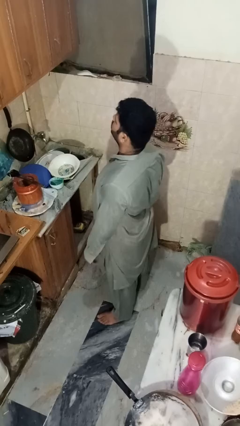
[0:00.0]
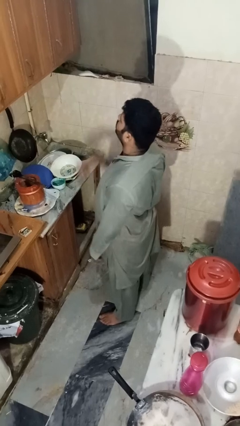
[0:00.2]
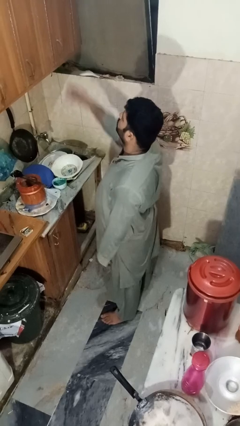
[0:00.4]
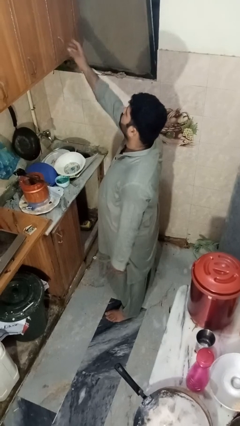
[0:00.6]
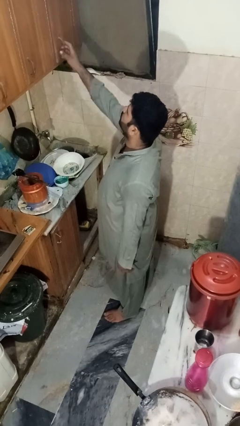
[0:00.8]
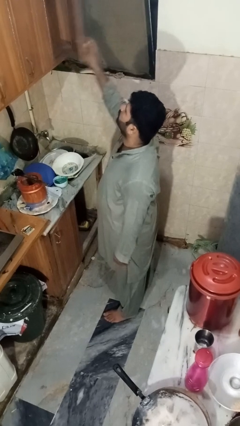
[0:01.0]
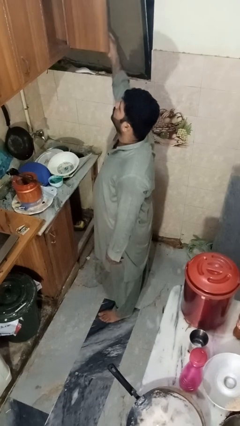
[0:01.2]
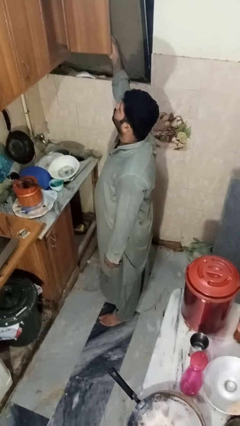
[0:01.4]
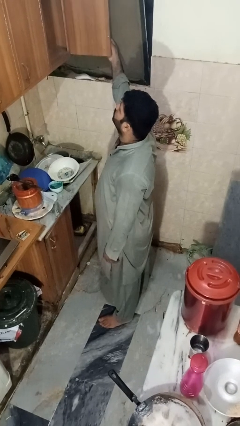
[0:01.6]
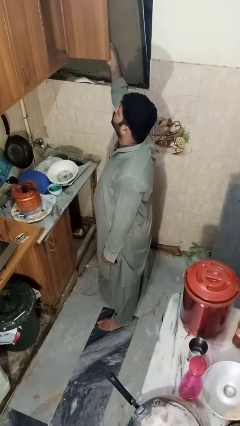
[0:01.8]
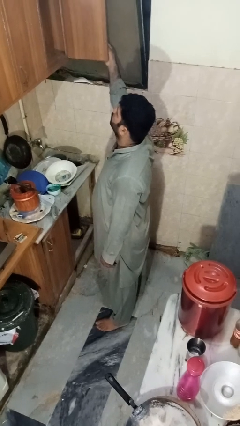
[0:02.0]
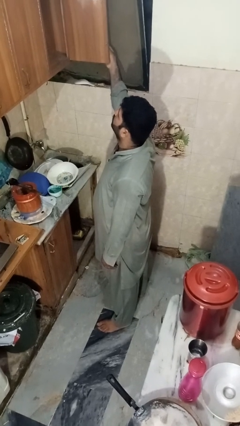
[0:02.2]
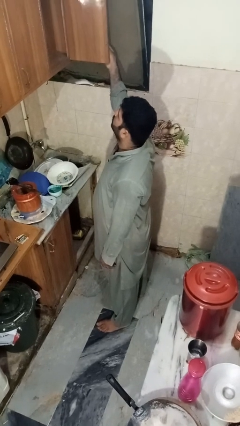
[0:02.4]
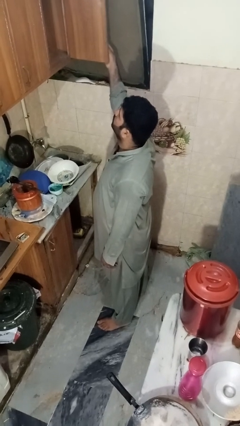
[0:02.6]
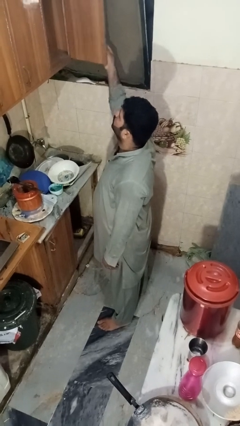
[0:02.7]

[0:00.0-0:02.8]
person opens cabinet

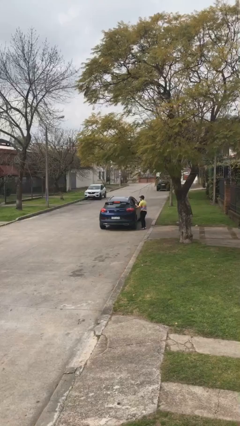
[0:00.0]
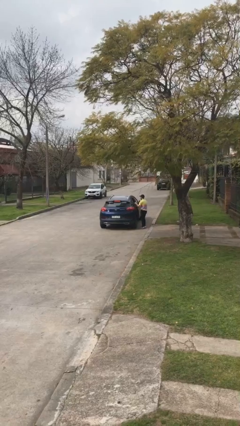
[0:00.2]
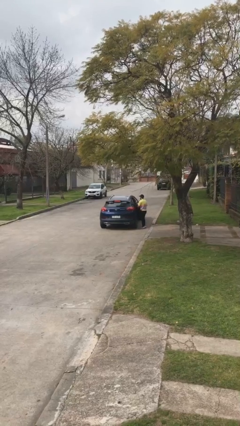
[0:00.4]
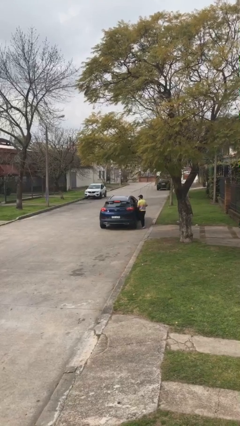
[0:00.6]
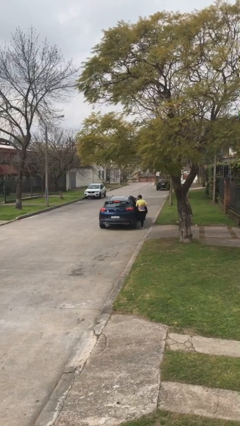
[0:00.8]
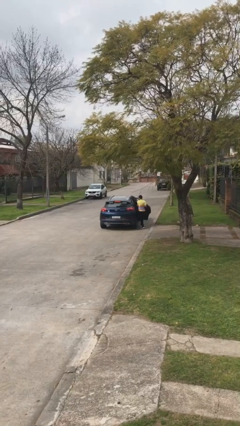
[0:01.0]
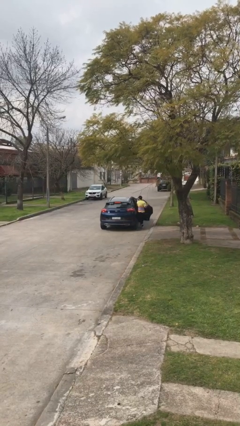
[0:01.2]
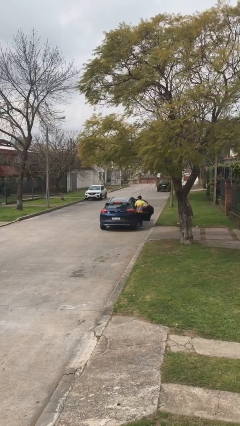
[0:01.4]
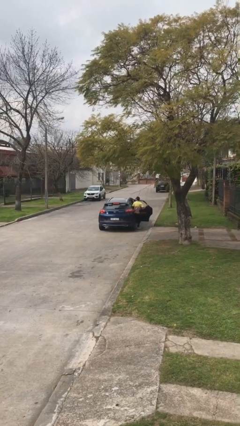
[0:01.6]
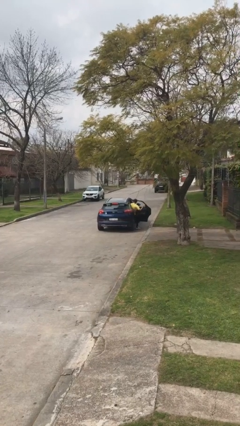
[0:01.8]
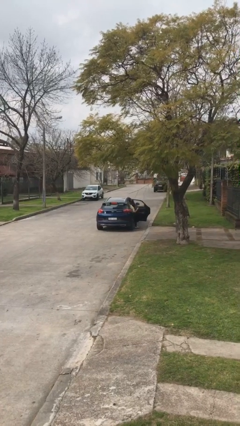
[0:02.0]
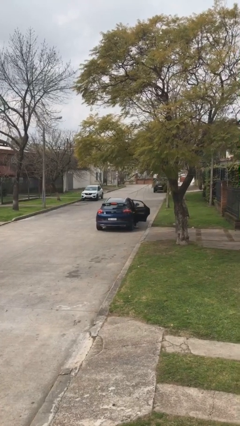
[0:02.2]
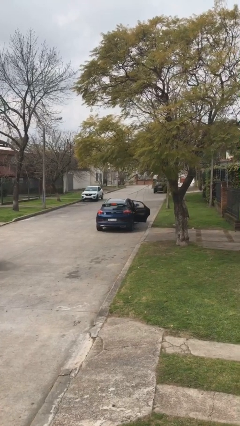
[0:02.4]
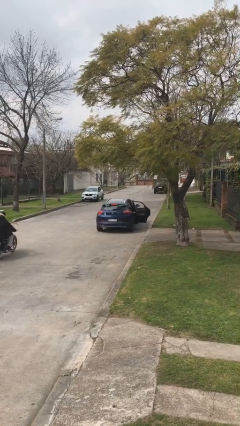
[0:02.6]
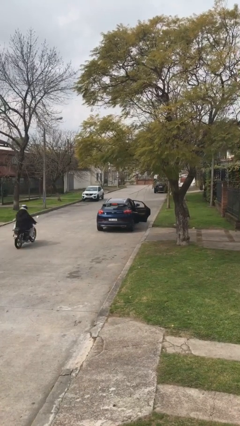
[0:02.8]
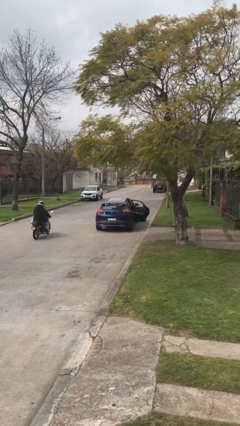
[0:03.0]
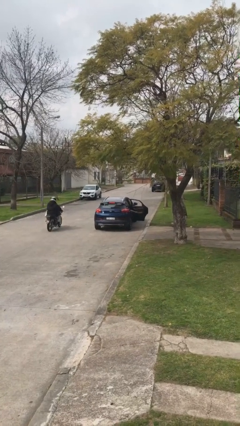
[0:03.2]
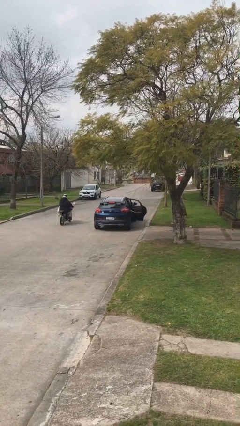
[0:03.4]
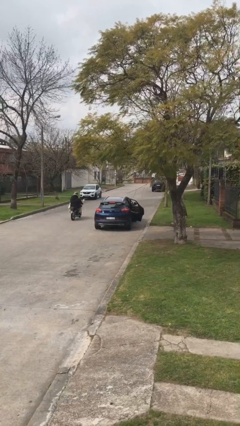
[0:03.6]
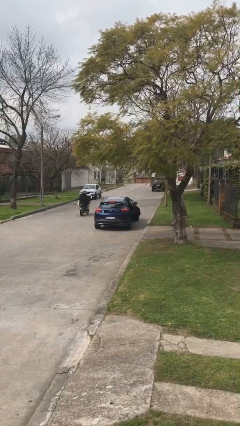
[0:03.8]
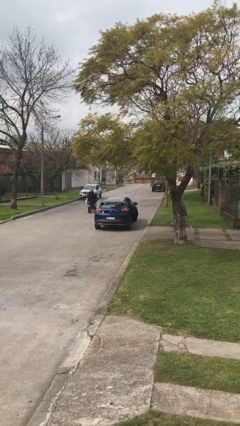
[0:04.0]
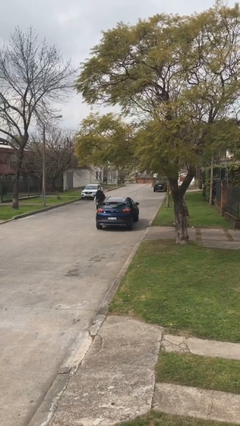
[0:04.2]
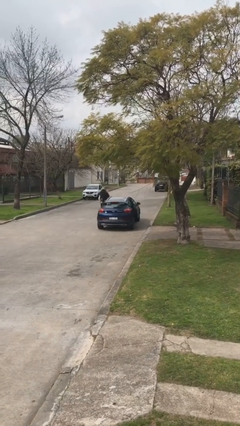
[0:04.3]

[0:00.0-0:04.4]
car picks up person

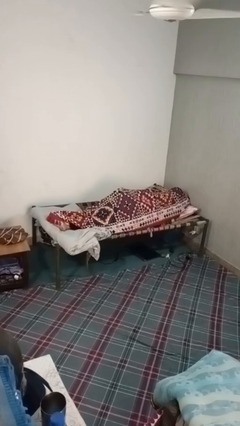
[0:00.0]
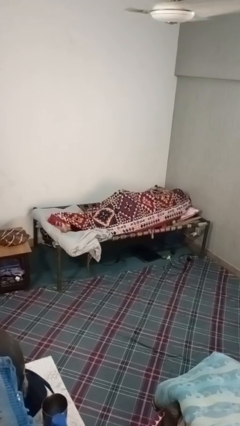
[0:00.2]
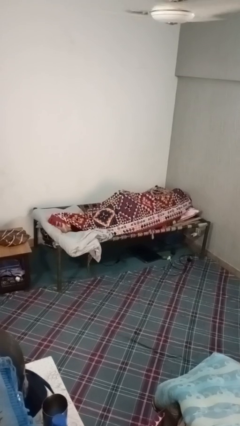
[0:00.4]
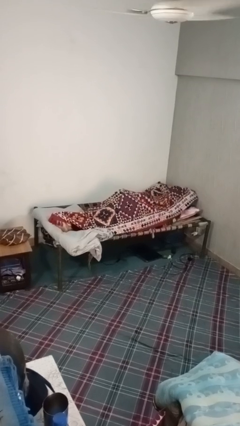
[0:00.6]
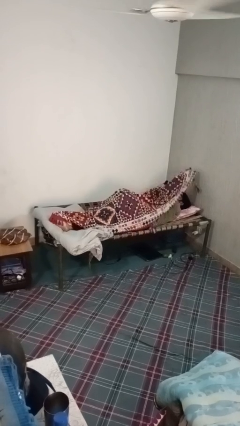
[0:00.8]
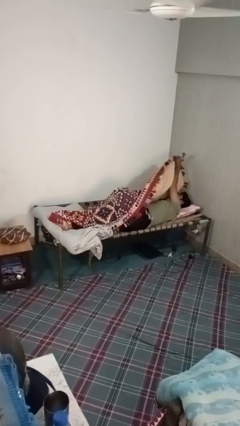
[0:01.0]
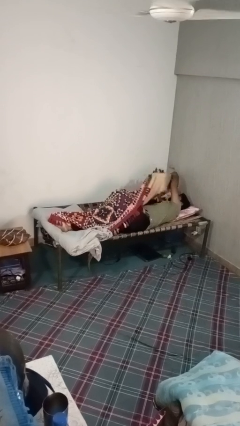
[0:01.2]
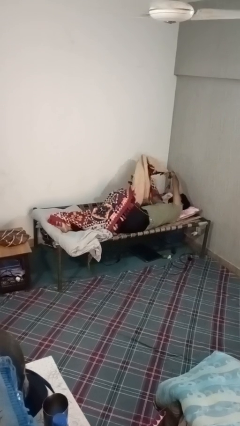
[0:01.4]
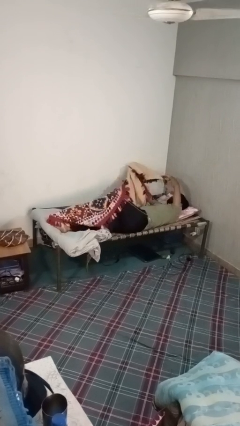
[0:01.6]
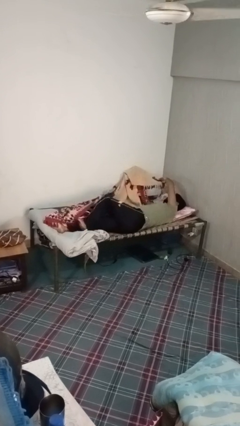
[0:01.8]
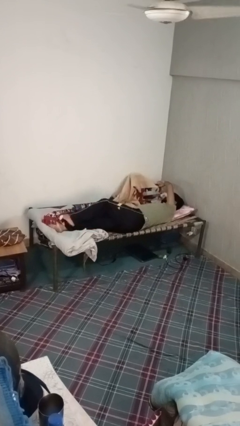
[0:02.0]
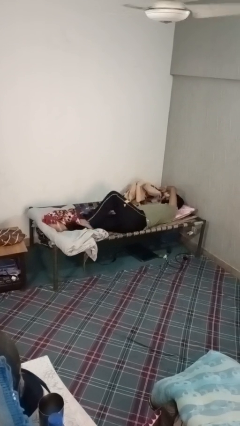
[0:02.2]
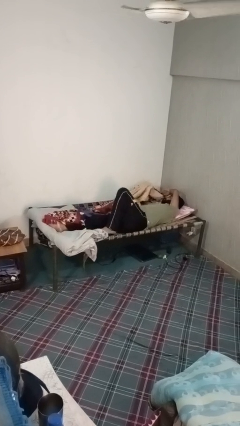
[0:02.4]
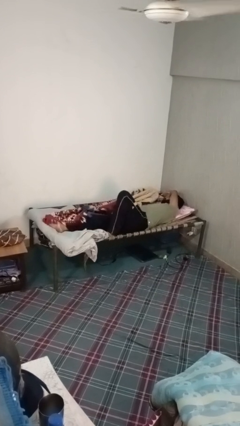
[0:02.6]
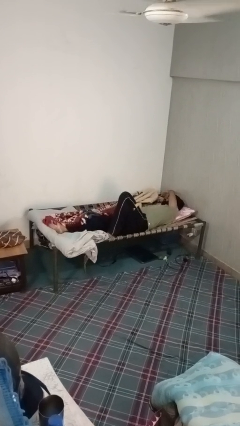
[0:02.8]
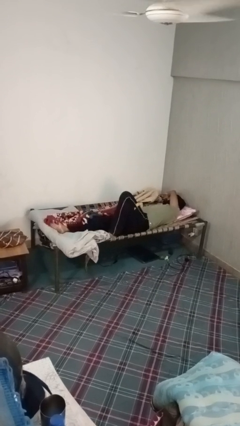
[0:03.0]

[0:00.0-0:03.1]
person uncovers with blanket

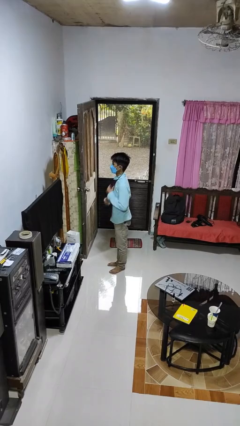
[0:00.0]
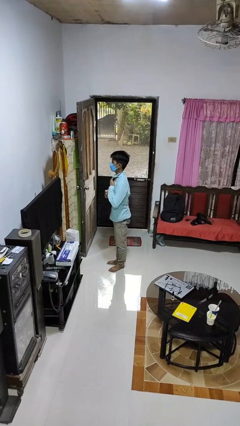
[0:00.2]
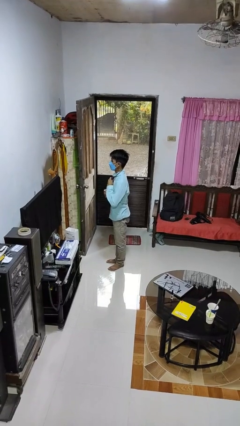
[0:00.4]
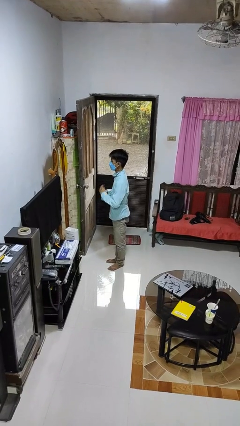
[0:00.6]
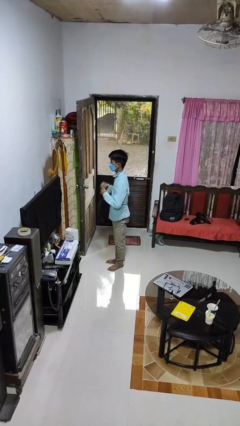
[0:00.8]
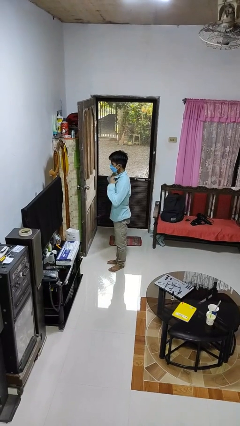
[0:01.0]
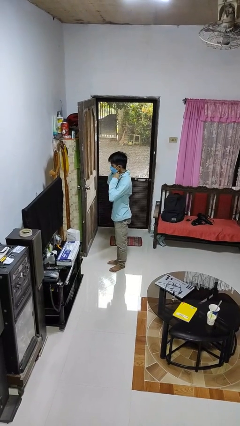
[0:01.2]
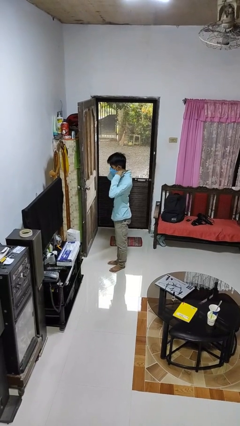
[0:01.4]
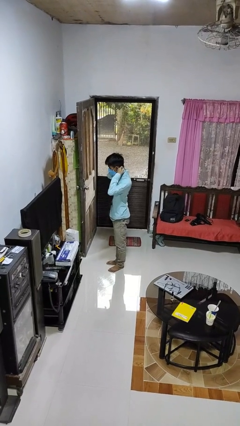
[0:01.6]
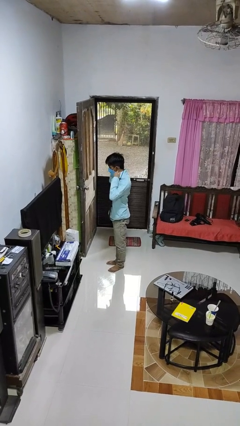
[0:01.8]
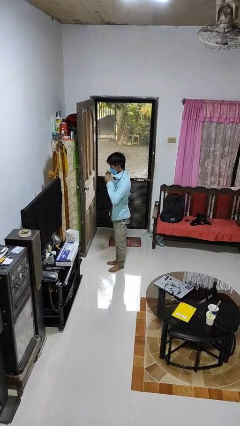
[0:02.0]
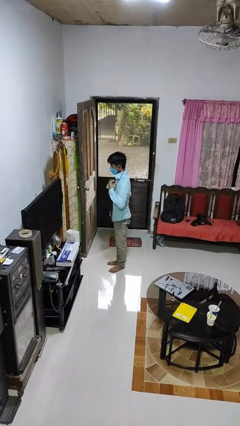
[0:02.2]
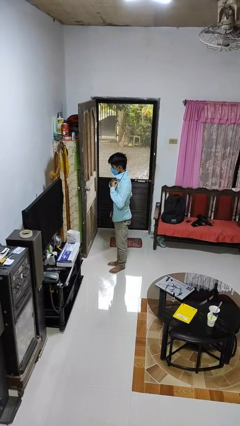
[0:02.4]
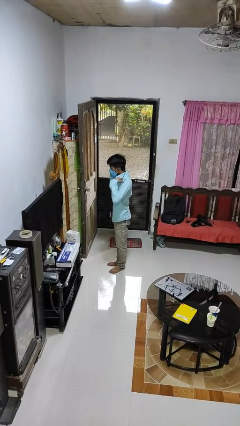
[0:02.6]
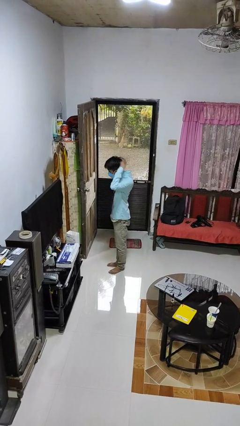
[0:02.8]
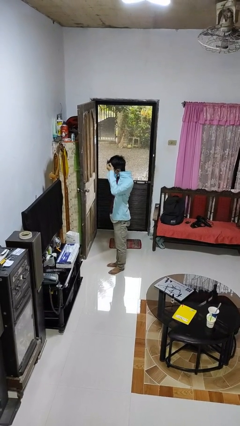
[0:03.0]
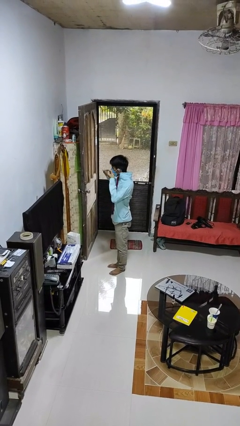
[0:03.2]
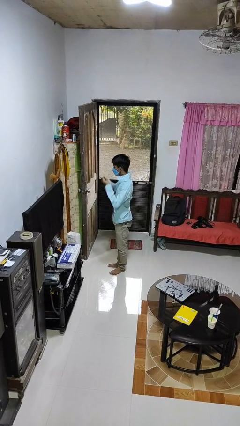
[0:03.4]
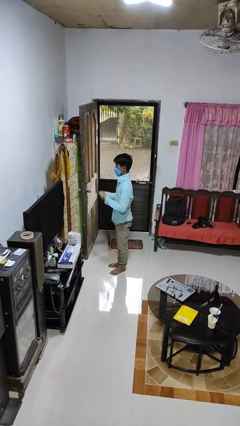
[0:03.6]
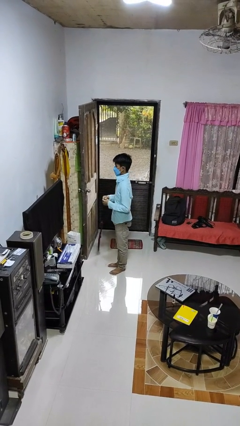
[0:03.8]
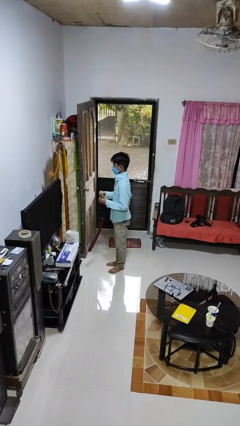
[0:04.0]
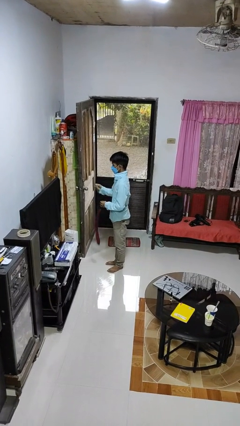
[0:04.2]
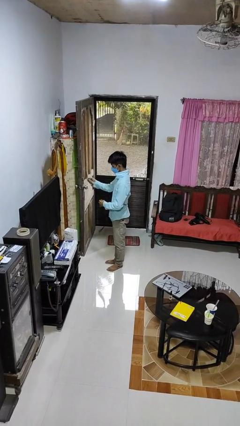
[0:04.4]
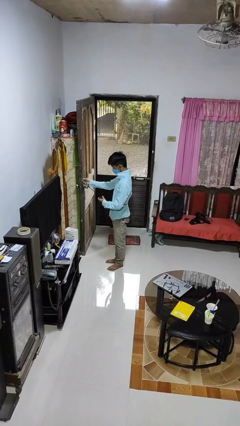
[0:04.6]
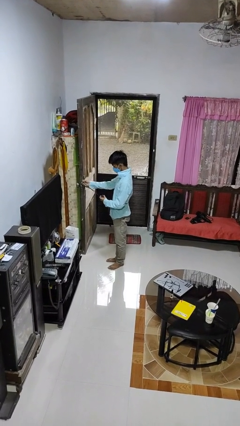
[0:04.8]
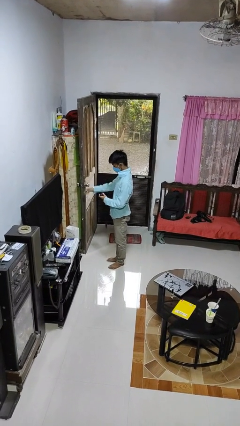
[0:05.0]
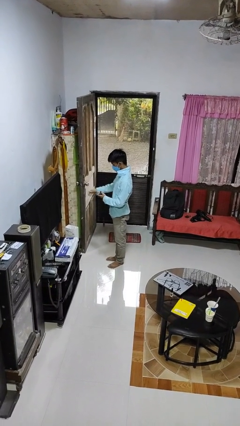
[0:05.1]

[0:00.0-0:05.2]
person takes off necktie

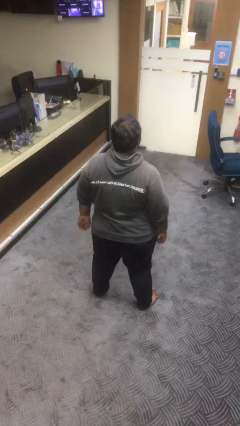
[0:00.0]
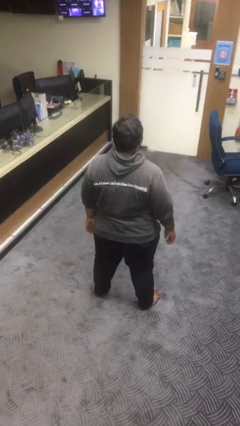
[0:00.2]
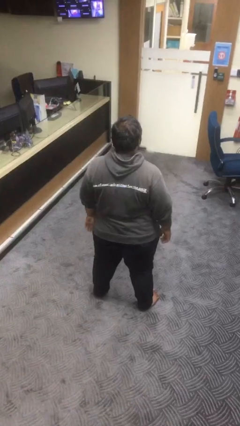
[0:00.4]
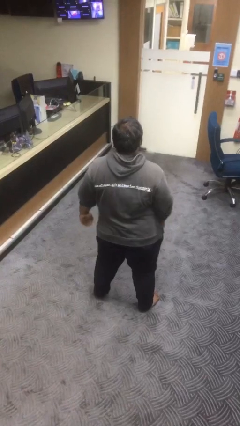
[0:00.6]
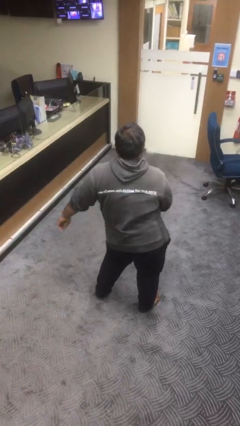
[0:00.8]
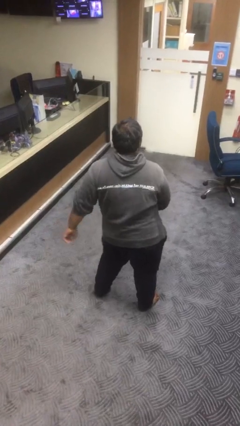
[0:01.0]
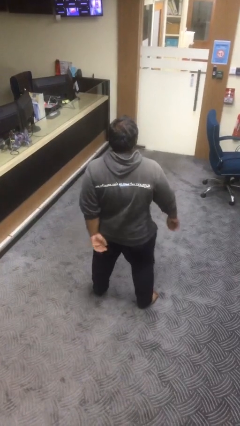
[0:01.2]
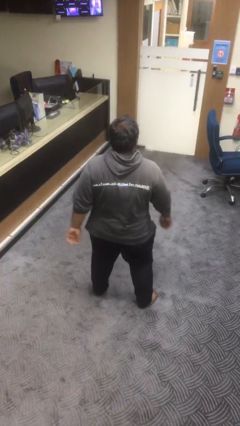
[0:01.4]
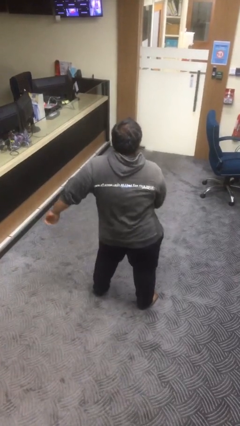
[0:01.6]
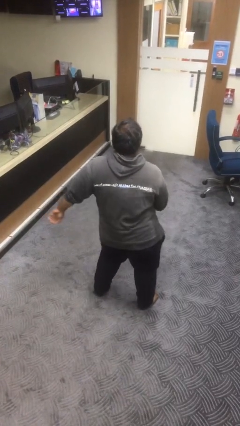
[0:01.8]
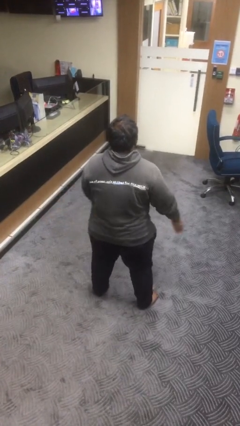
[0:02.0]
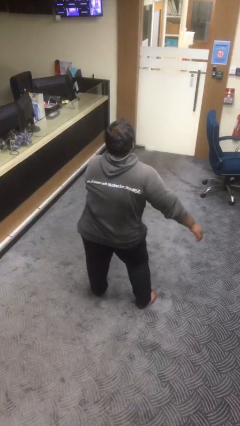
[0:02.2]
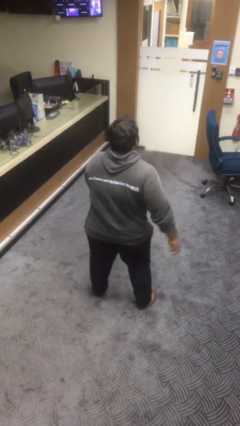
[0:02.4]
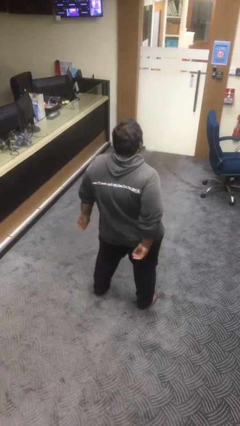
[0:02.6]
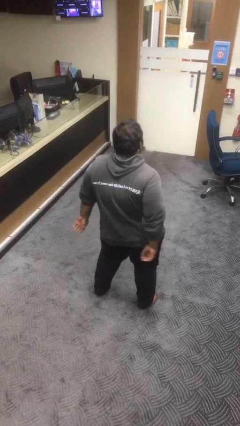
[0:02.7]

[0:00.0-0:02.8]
person dances in place
